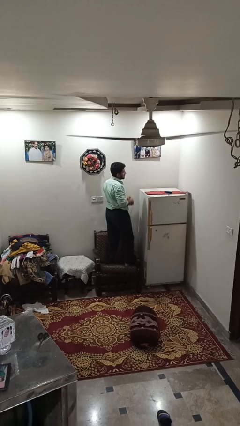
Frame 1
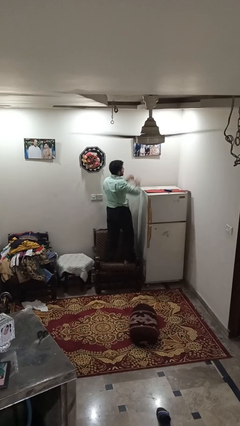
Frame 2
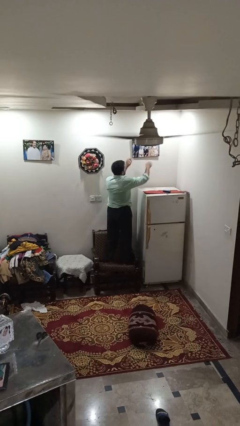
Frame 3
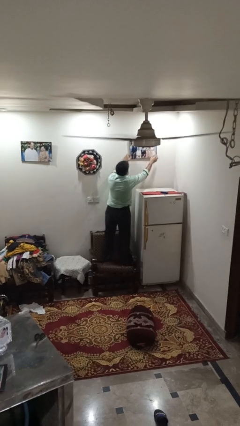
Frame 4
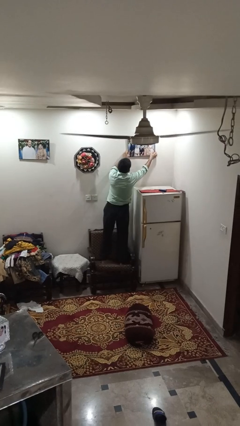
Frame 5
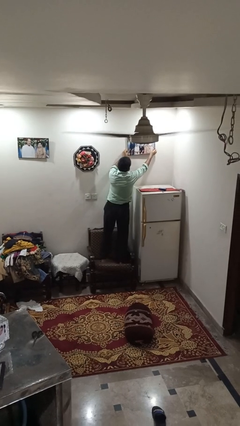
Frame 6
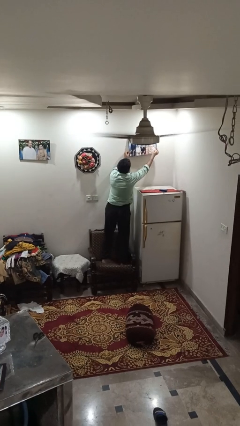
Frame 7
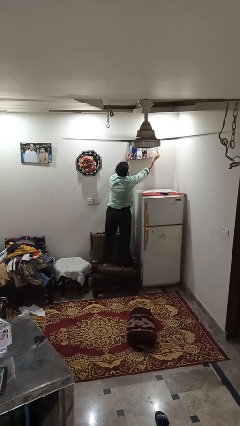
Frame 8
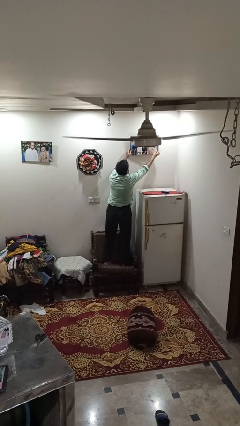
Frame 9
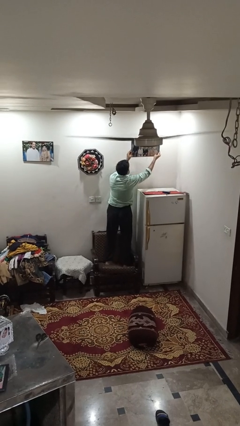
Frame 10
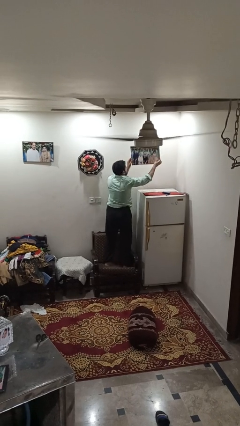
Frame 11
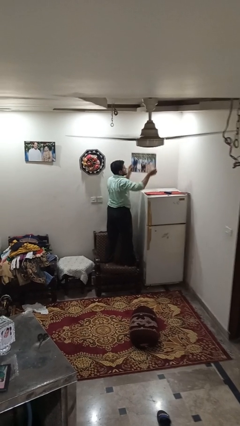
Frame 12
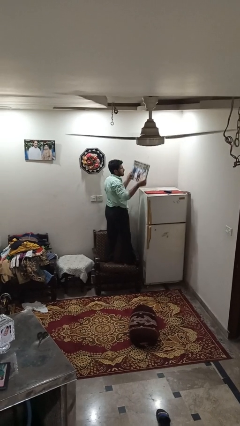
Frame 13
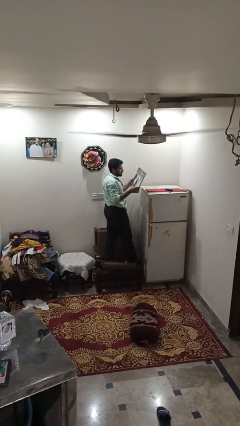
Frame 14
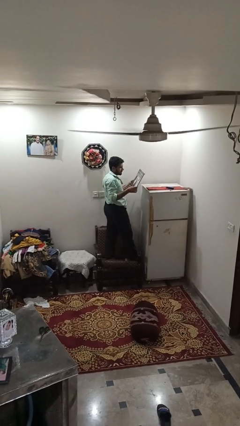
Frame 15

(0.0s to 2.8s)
person takes down picture frame

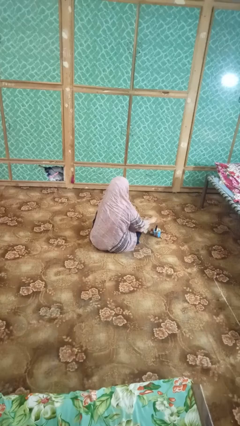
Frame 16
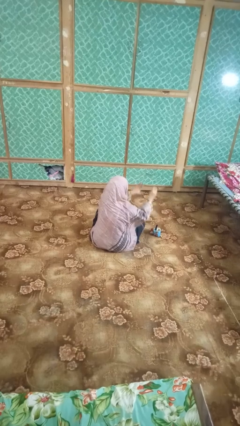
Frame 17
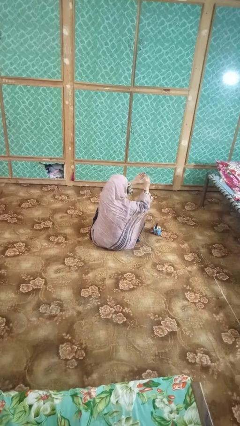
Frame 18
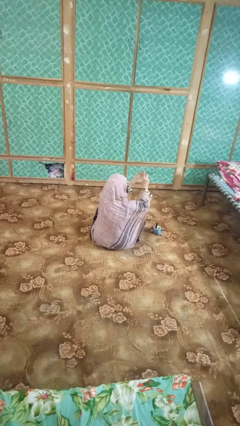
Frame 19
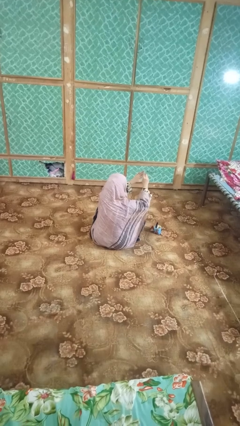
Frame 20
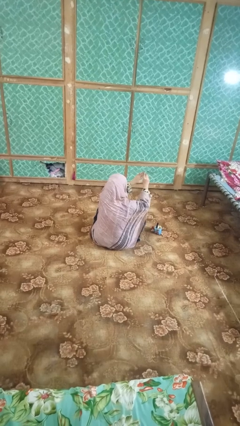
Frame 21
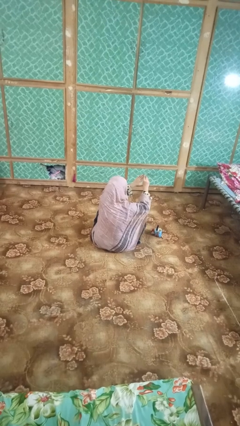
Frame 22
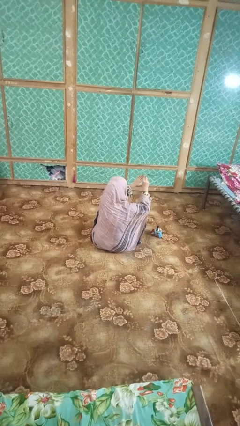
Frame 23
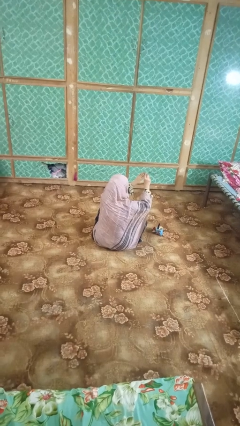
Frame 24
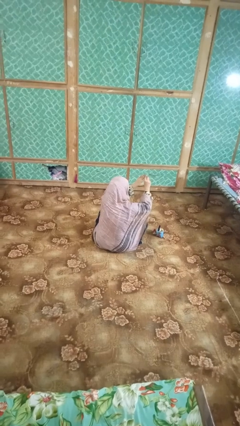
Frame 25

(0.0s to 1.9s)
person paints fingernails

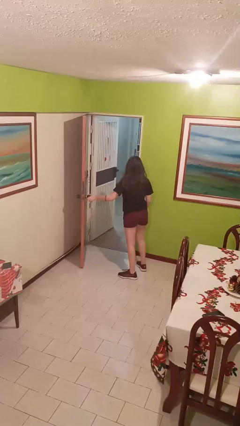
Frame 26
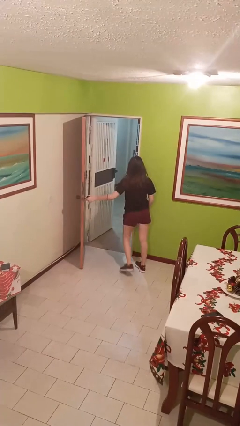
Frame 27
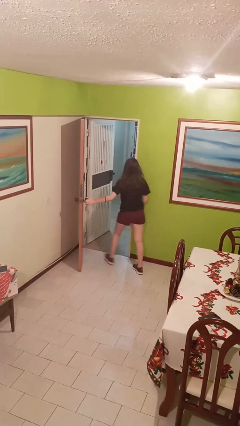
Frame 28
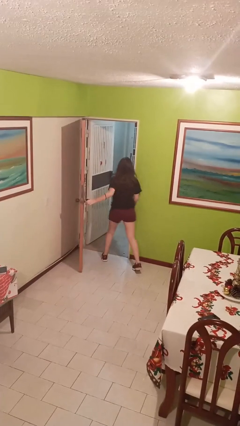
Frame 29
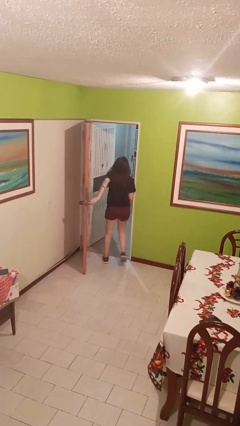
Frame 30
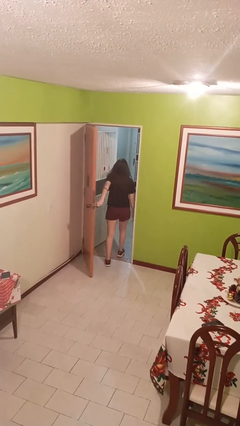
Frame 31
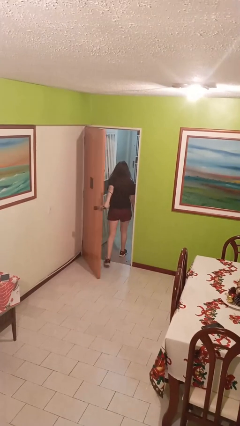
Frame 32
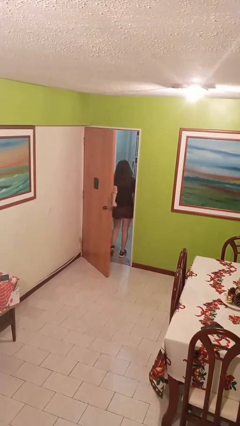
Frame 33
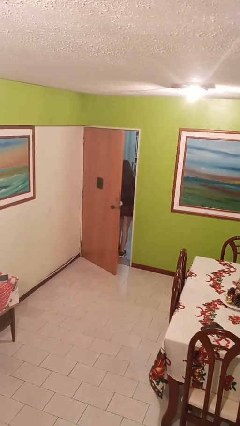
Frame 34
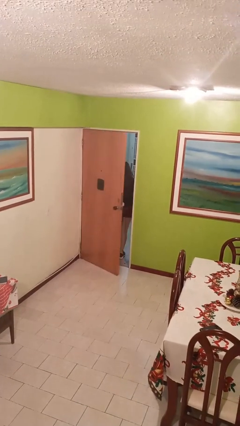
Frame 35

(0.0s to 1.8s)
person closes facility door

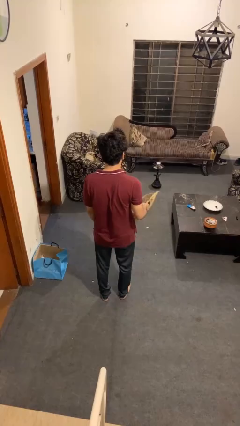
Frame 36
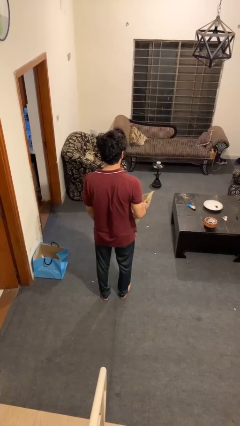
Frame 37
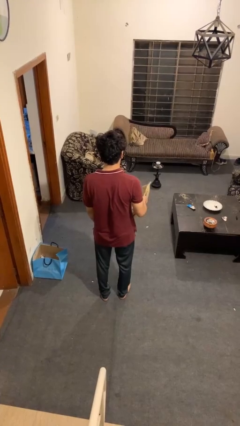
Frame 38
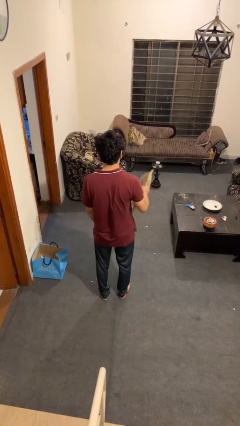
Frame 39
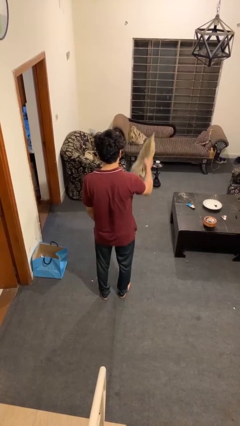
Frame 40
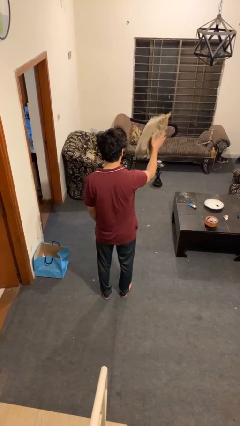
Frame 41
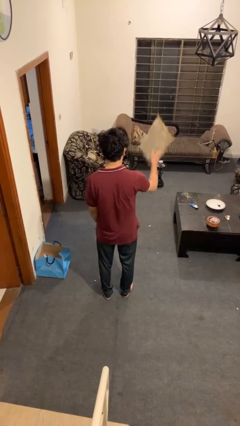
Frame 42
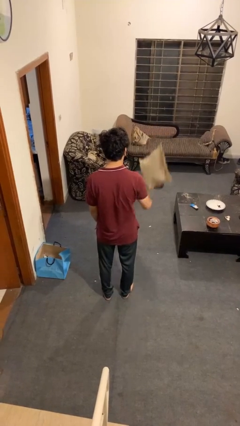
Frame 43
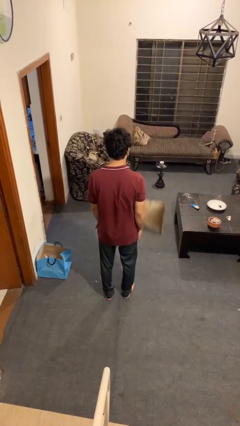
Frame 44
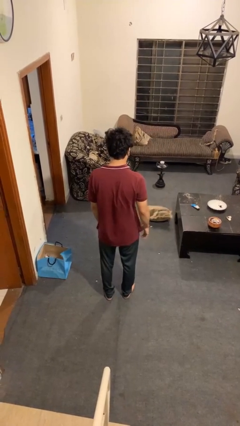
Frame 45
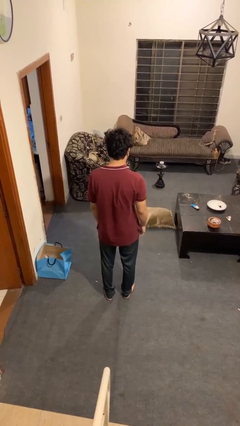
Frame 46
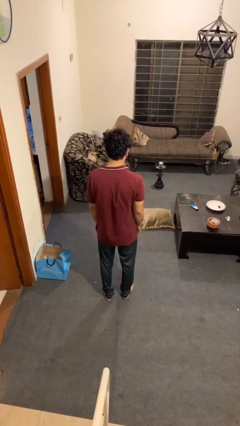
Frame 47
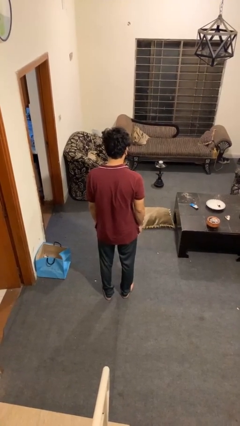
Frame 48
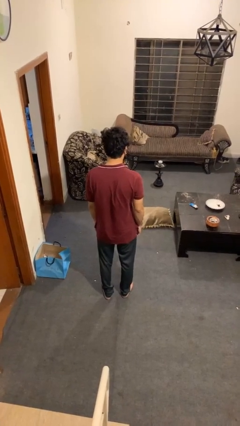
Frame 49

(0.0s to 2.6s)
person throws object into air

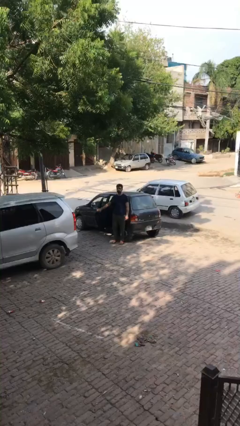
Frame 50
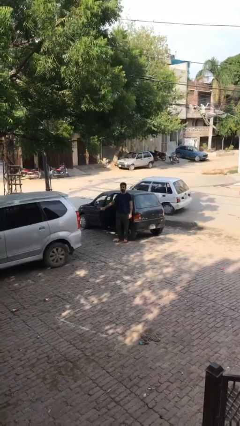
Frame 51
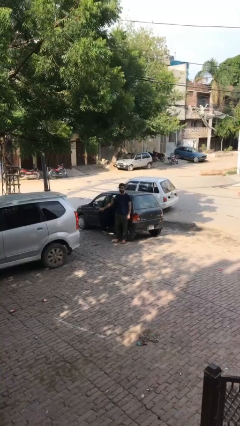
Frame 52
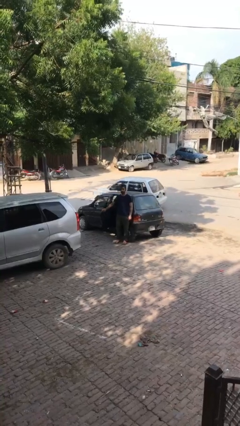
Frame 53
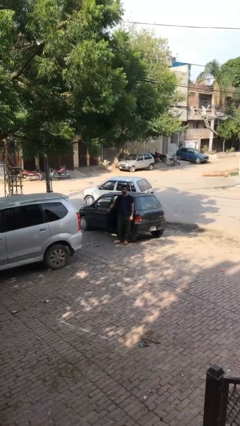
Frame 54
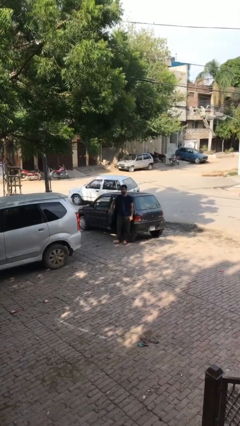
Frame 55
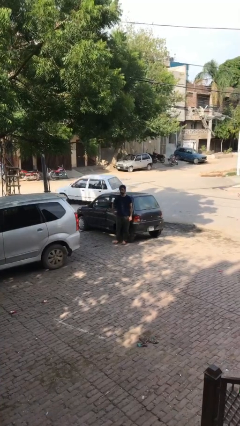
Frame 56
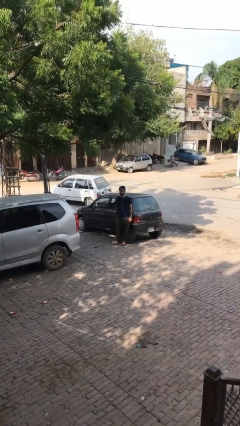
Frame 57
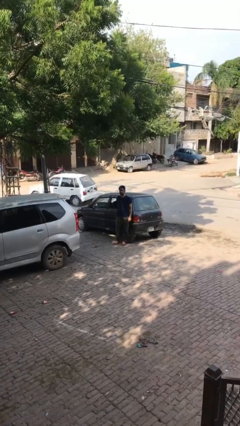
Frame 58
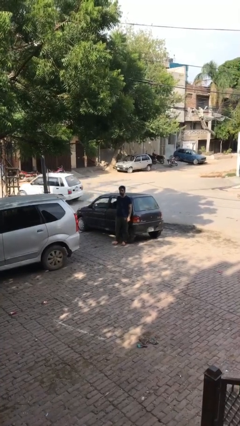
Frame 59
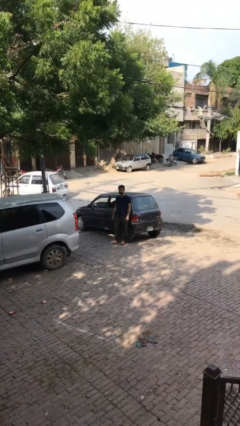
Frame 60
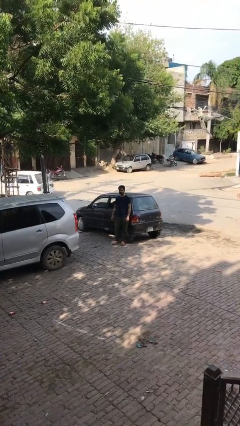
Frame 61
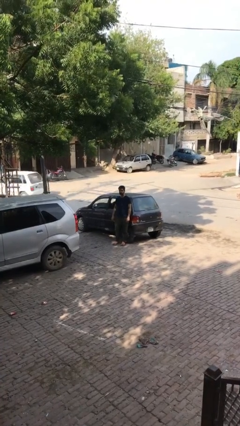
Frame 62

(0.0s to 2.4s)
person closes car door

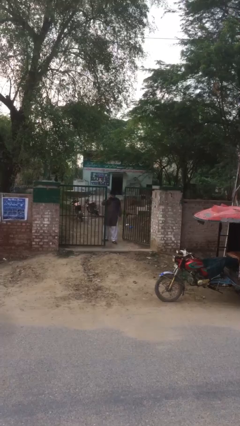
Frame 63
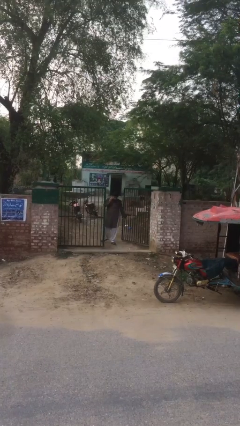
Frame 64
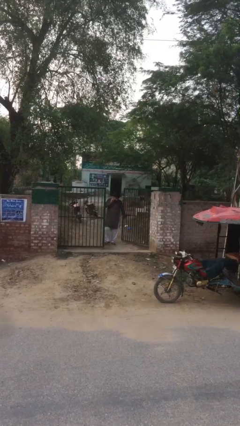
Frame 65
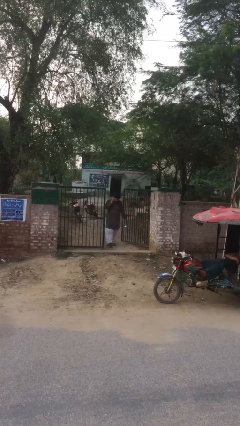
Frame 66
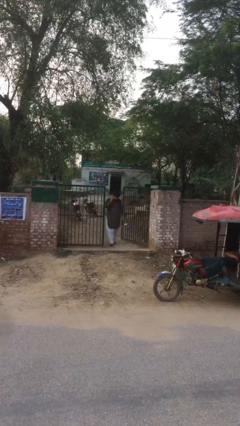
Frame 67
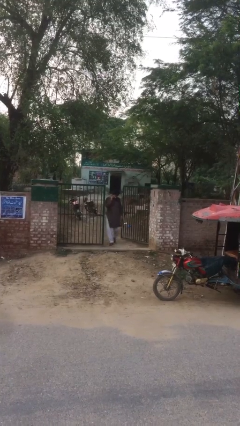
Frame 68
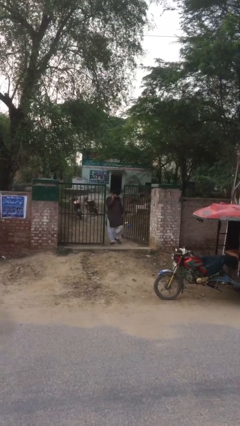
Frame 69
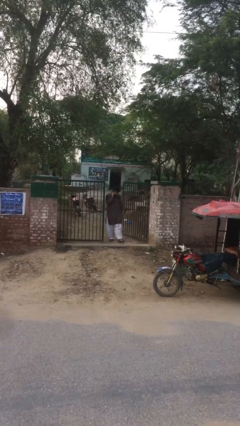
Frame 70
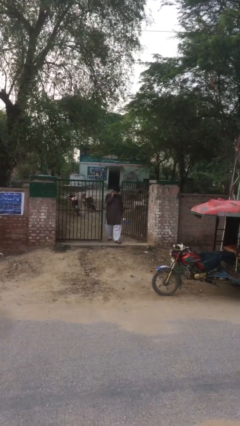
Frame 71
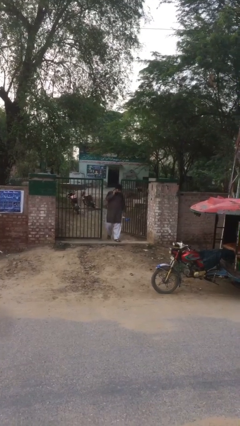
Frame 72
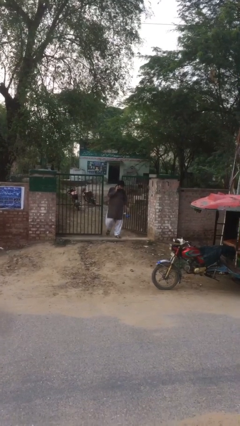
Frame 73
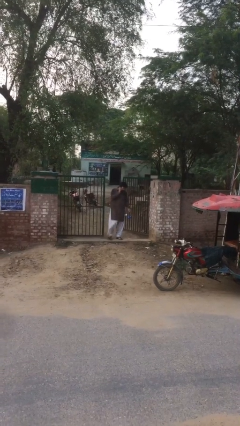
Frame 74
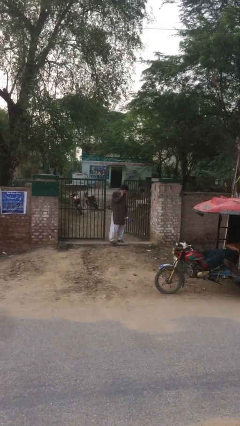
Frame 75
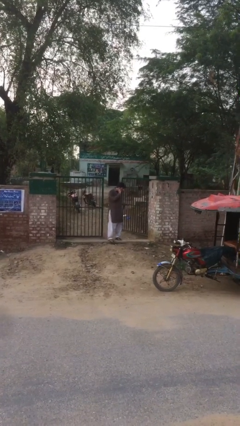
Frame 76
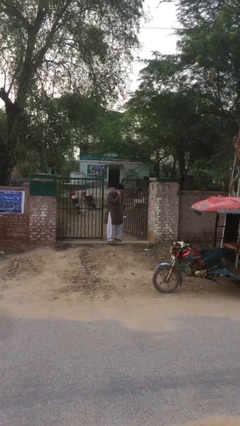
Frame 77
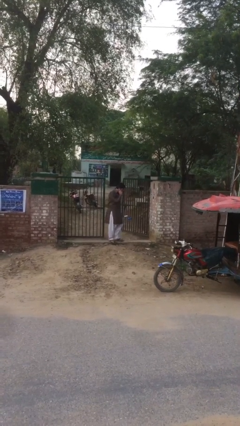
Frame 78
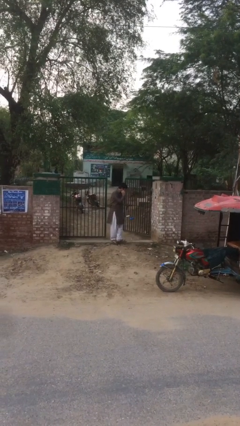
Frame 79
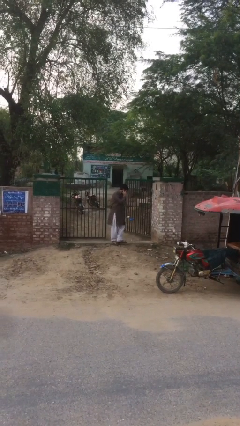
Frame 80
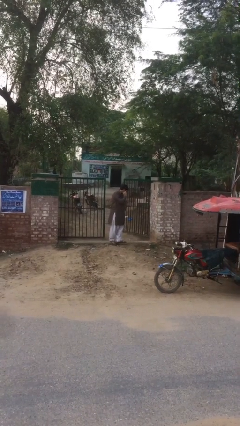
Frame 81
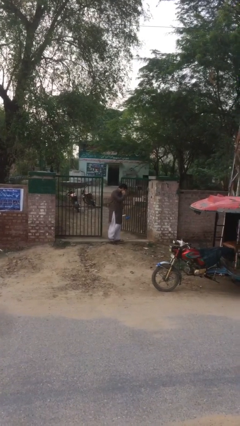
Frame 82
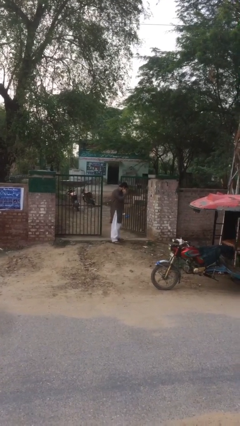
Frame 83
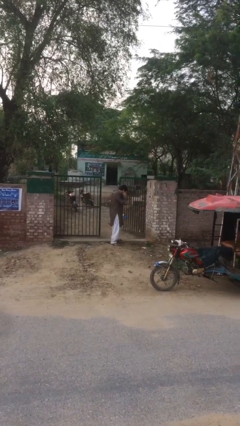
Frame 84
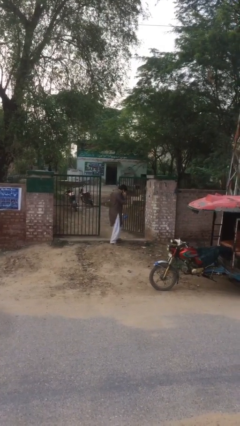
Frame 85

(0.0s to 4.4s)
person enters scene through structure

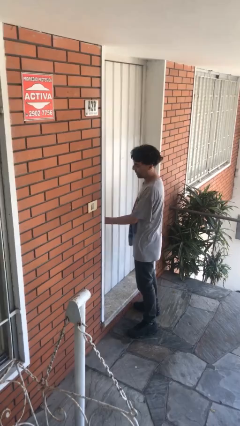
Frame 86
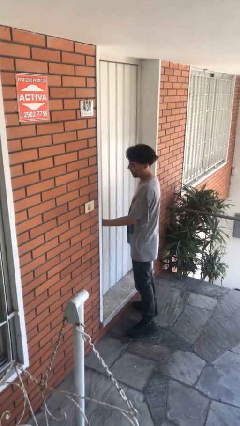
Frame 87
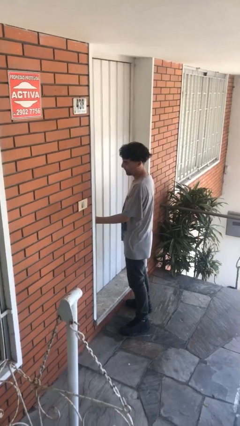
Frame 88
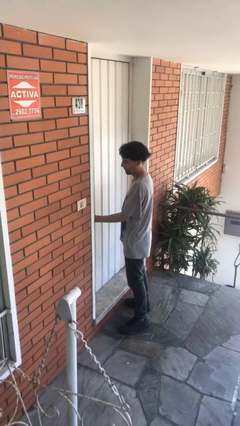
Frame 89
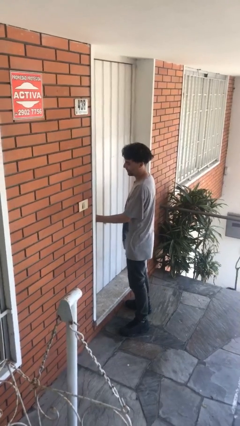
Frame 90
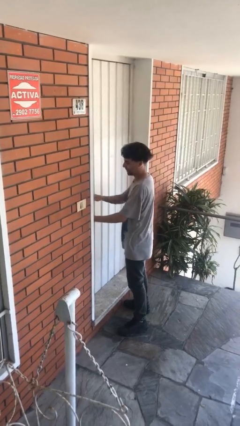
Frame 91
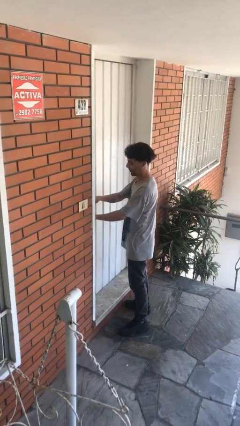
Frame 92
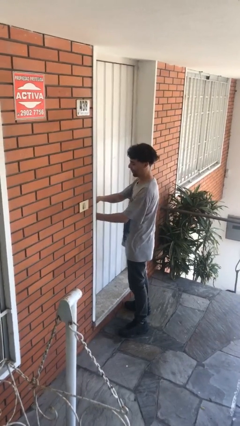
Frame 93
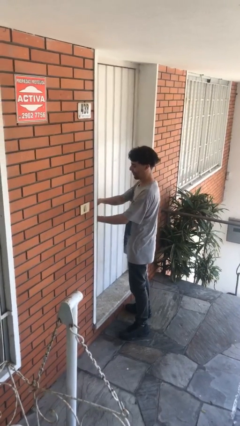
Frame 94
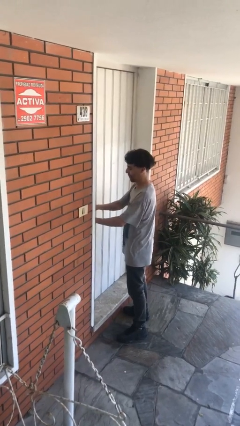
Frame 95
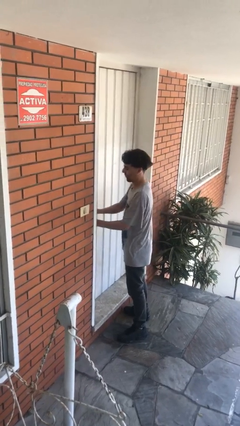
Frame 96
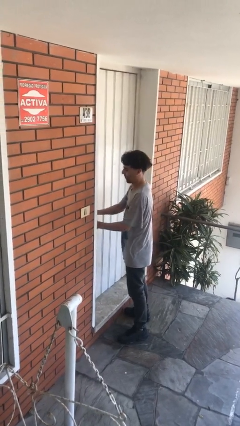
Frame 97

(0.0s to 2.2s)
person unlocks door with keys
